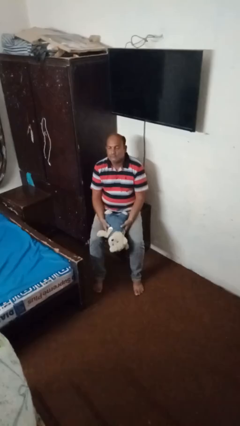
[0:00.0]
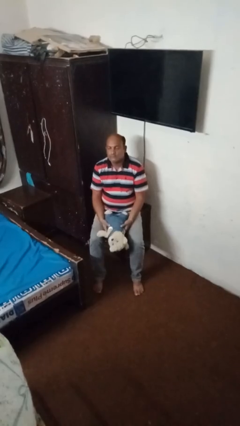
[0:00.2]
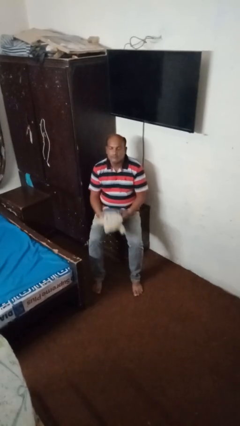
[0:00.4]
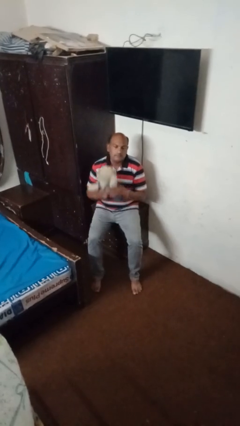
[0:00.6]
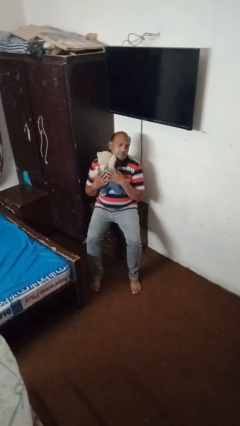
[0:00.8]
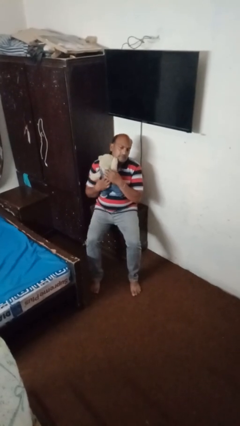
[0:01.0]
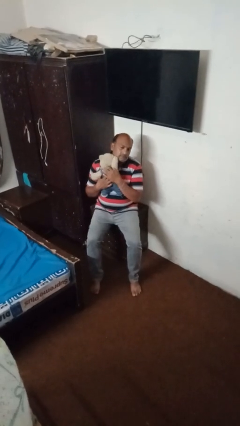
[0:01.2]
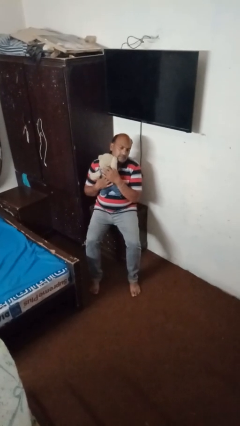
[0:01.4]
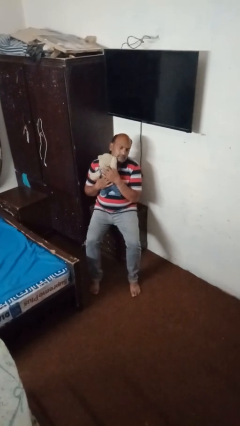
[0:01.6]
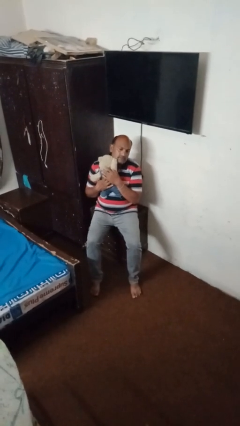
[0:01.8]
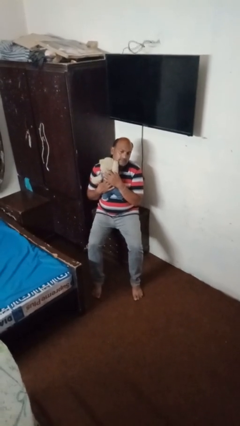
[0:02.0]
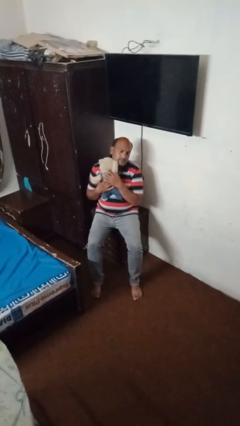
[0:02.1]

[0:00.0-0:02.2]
person hugs stuffed animal

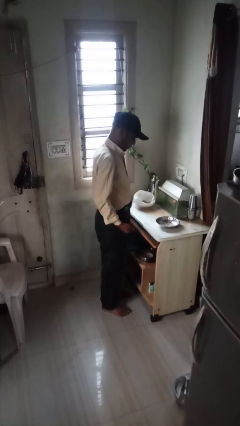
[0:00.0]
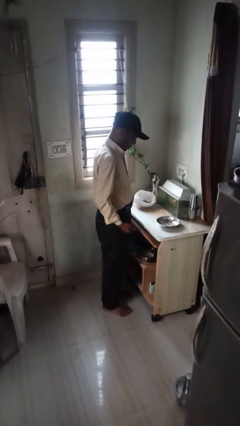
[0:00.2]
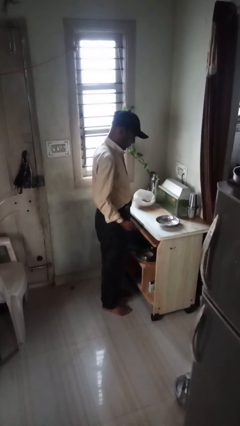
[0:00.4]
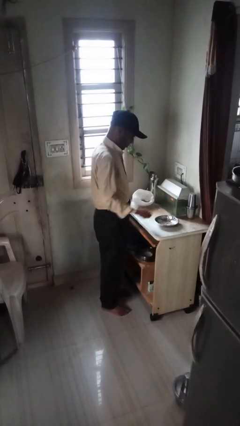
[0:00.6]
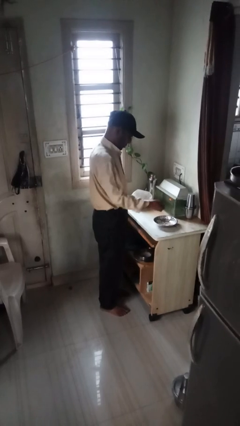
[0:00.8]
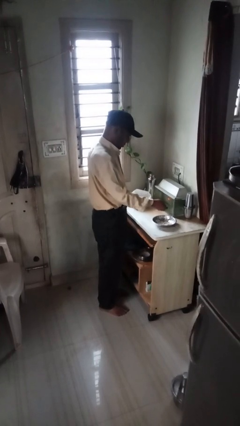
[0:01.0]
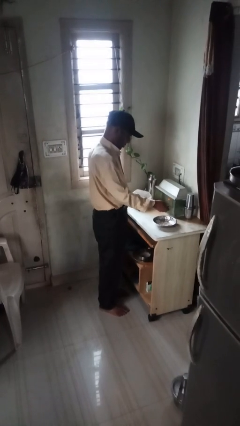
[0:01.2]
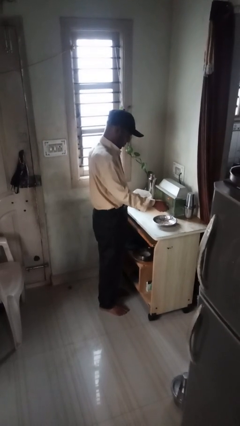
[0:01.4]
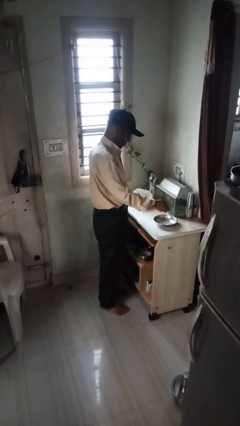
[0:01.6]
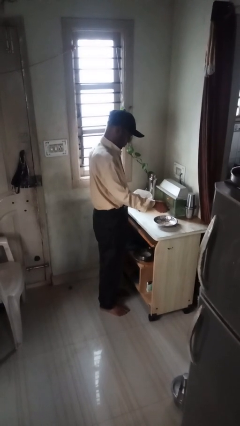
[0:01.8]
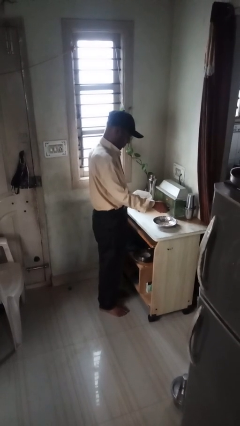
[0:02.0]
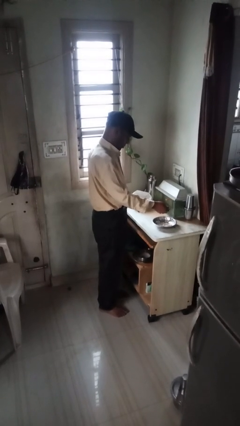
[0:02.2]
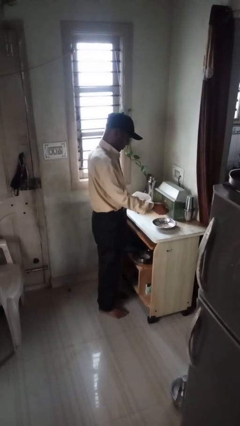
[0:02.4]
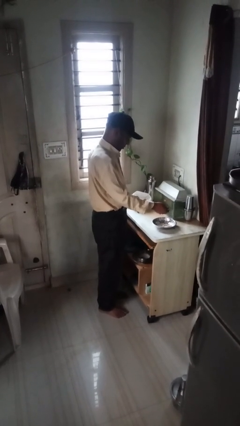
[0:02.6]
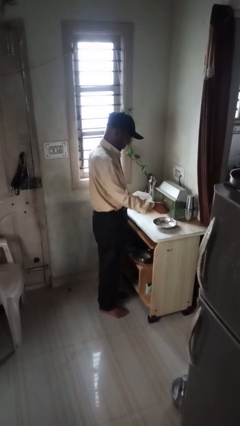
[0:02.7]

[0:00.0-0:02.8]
person pours into bowl

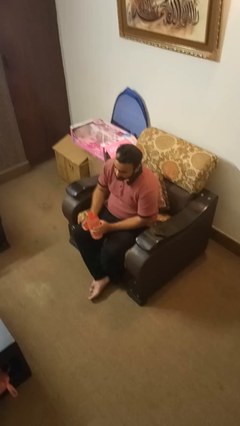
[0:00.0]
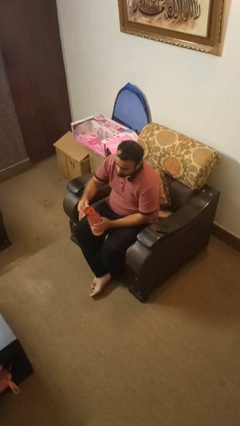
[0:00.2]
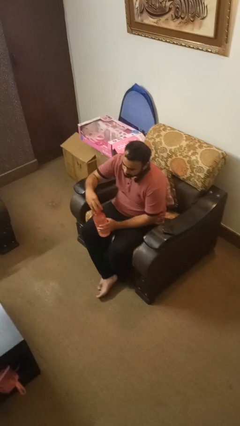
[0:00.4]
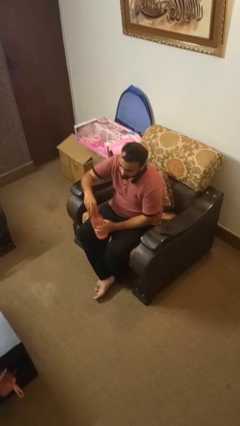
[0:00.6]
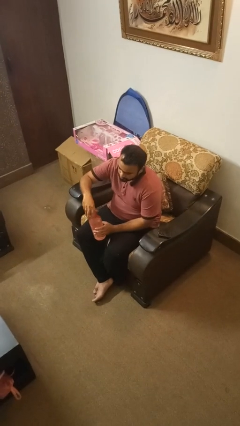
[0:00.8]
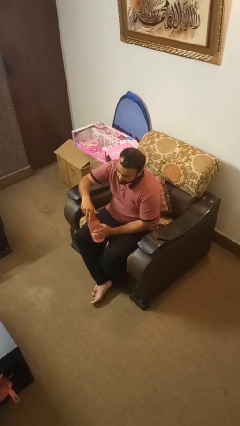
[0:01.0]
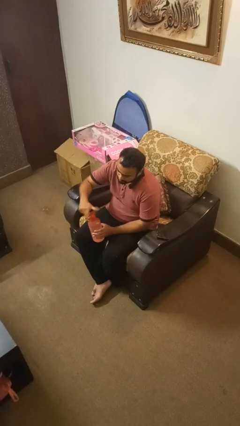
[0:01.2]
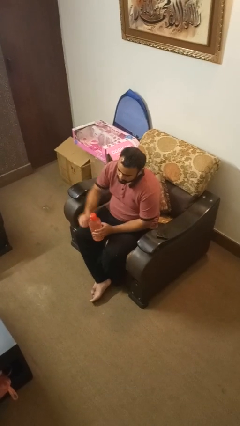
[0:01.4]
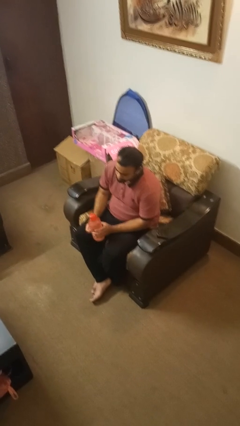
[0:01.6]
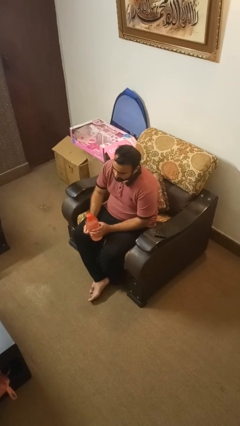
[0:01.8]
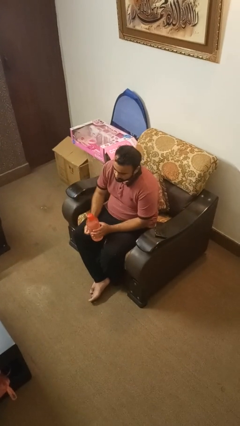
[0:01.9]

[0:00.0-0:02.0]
person screws lid to bottle

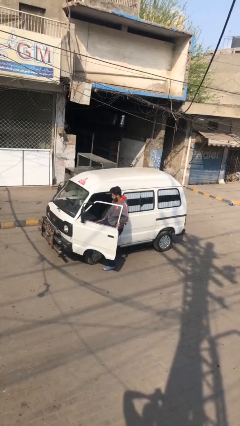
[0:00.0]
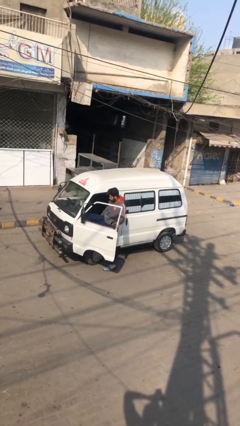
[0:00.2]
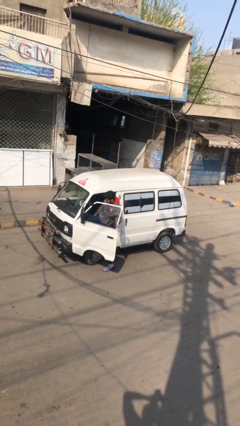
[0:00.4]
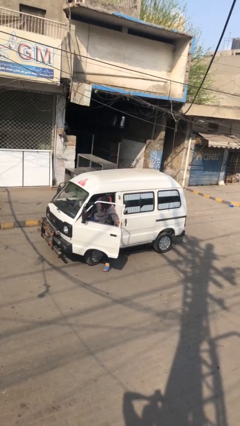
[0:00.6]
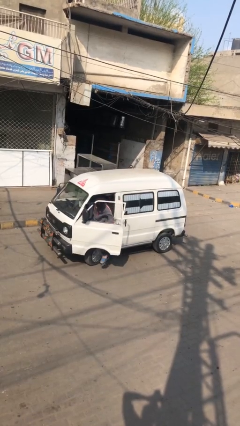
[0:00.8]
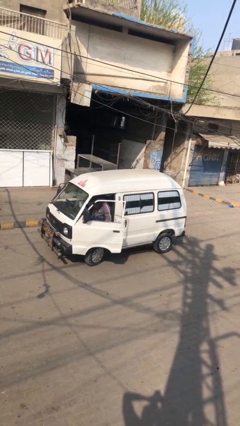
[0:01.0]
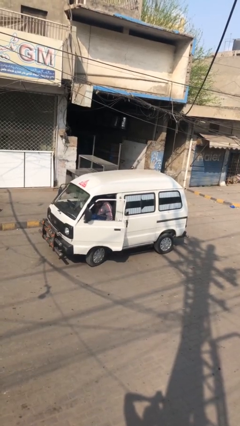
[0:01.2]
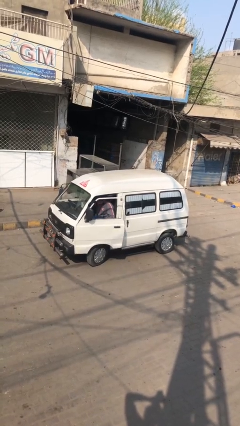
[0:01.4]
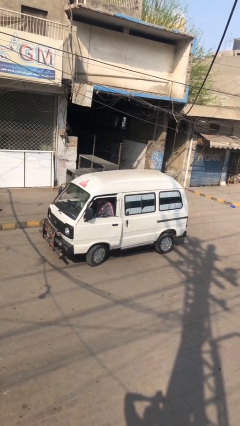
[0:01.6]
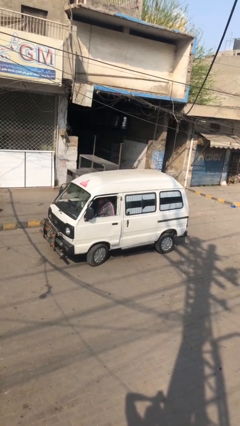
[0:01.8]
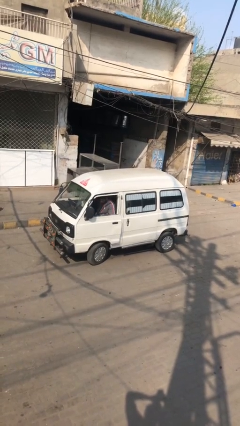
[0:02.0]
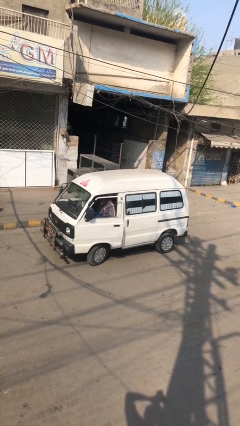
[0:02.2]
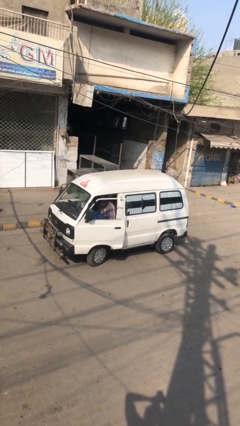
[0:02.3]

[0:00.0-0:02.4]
car picks up person

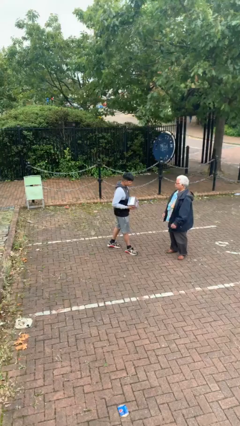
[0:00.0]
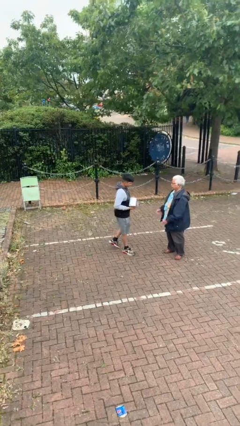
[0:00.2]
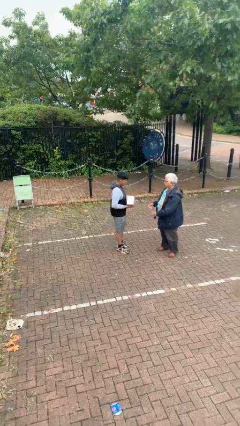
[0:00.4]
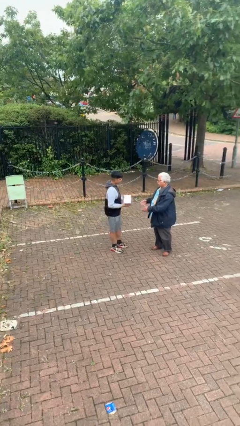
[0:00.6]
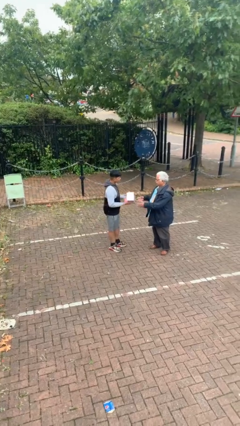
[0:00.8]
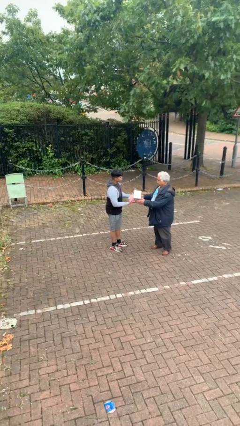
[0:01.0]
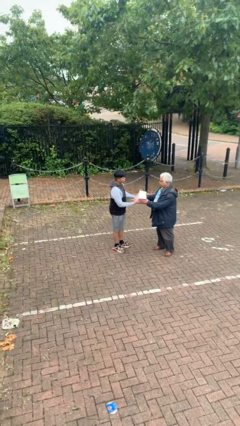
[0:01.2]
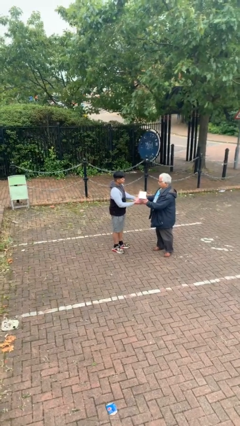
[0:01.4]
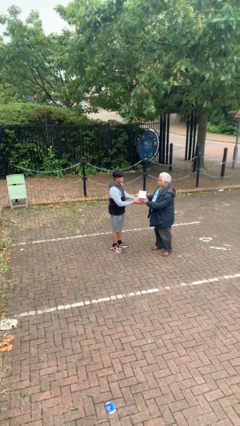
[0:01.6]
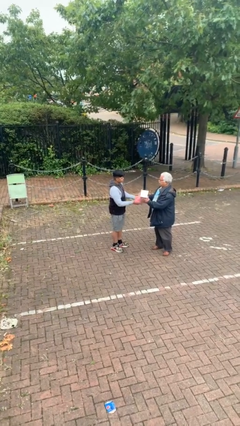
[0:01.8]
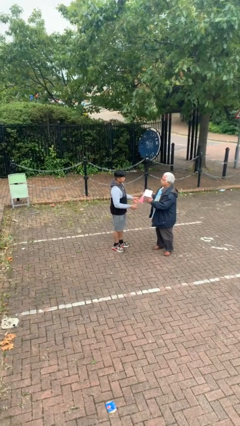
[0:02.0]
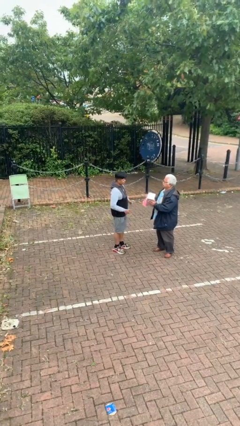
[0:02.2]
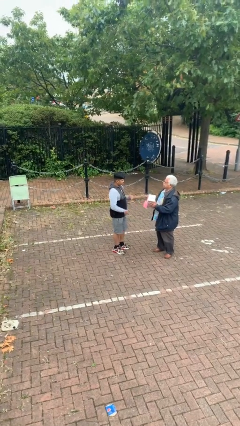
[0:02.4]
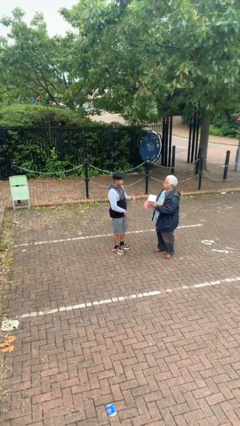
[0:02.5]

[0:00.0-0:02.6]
person transfers object to person

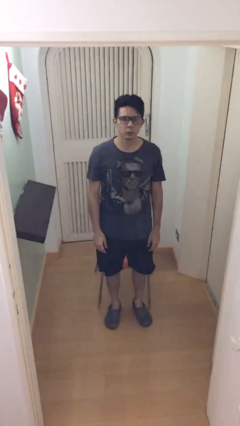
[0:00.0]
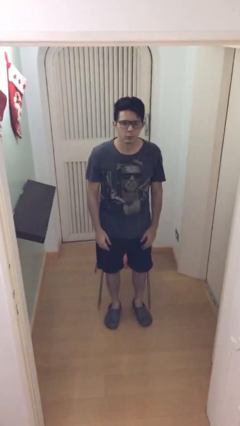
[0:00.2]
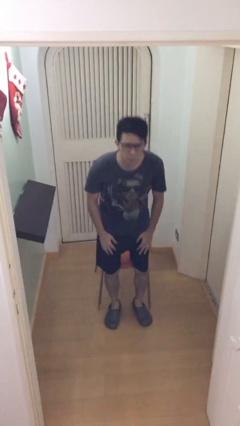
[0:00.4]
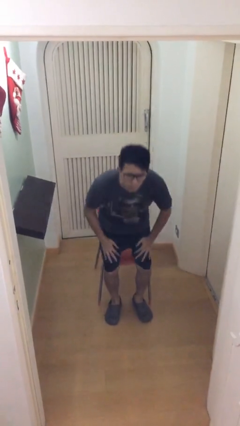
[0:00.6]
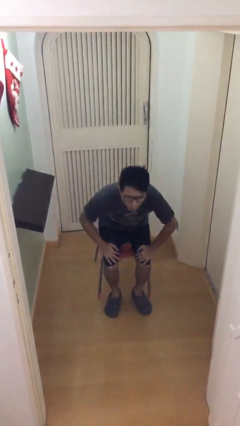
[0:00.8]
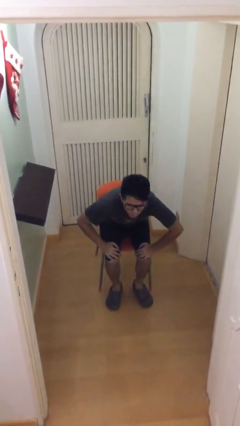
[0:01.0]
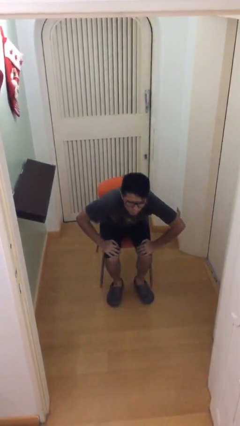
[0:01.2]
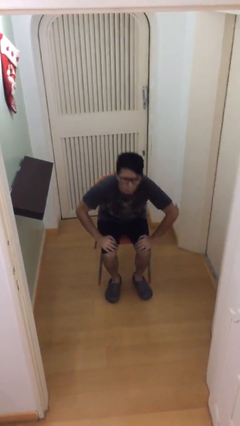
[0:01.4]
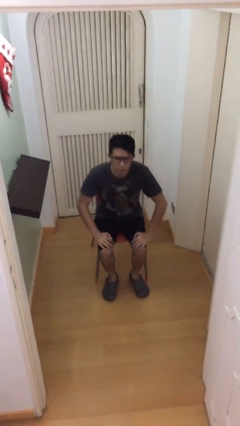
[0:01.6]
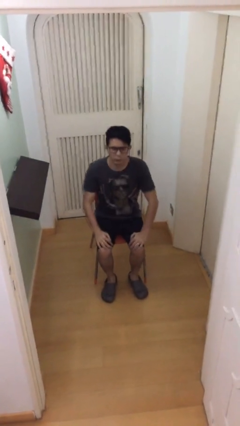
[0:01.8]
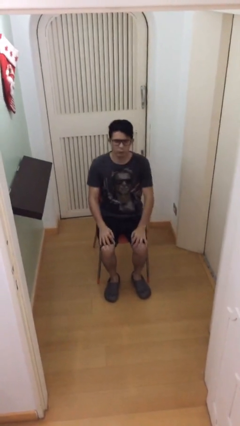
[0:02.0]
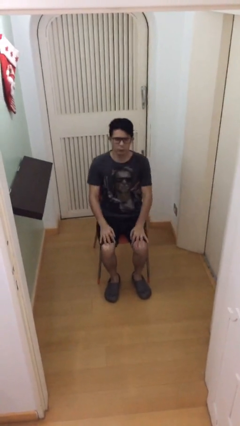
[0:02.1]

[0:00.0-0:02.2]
person sits down

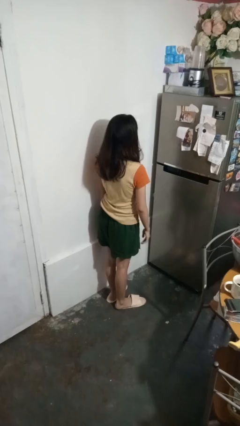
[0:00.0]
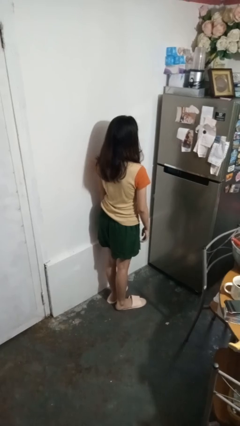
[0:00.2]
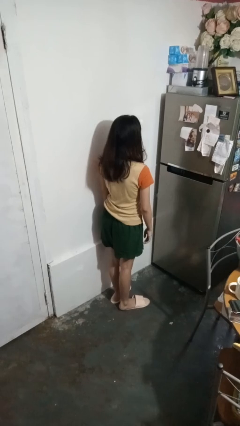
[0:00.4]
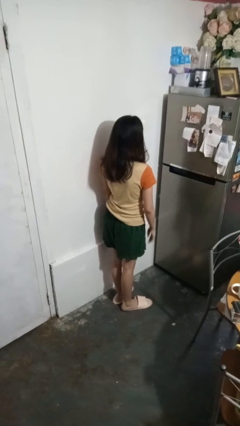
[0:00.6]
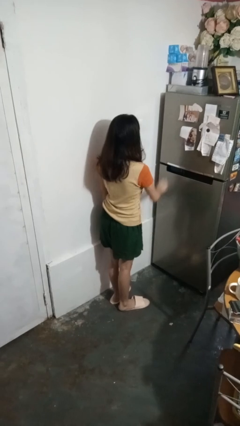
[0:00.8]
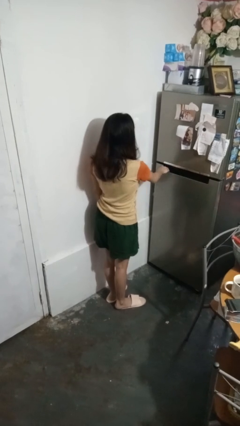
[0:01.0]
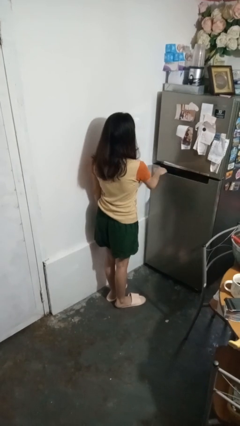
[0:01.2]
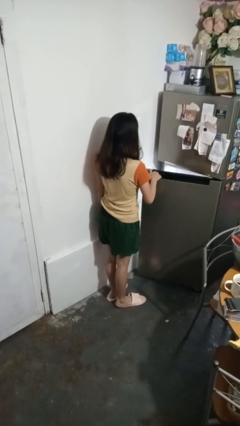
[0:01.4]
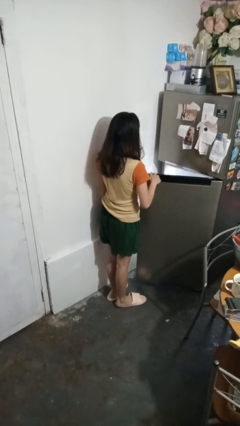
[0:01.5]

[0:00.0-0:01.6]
person opens refrigerator

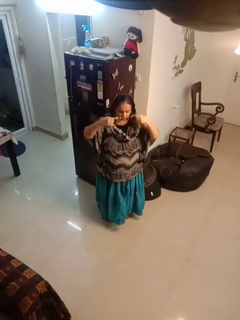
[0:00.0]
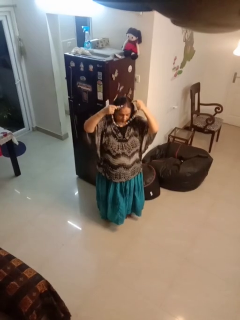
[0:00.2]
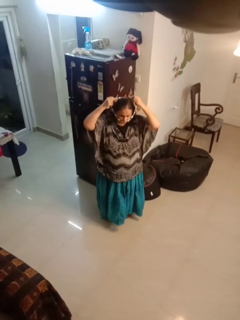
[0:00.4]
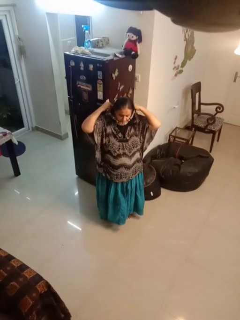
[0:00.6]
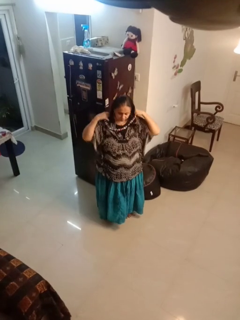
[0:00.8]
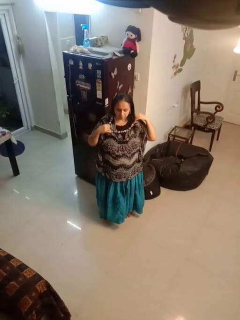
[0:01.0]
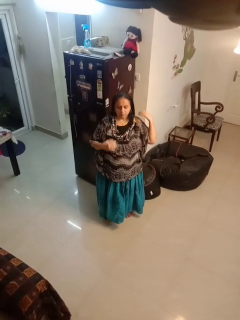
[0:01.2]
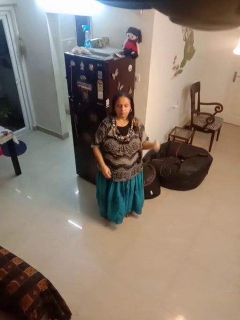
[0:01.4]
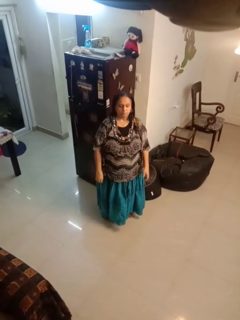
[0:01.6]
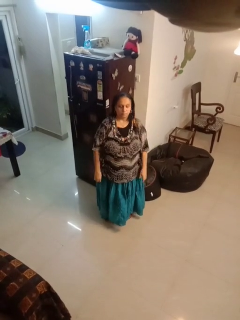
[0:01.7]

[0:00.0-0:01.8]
person puts on necklace
